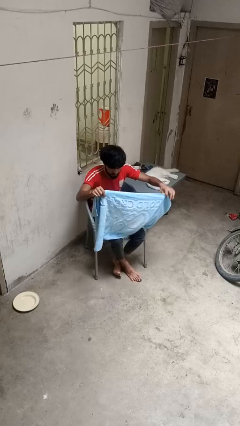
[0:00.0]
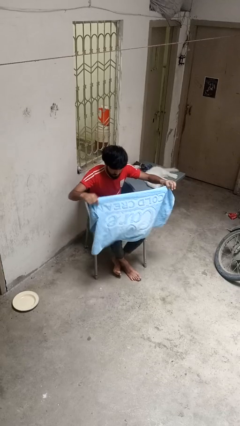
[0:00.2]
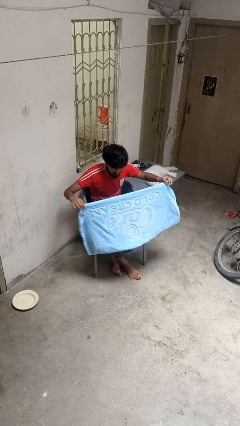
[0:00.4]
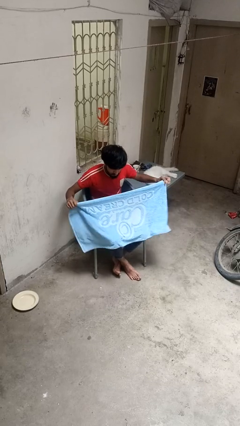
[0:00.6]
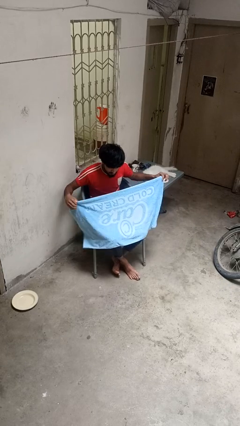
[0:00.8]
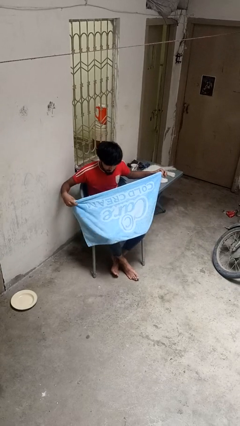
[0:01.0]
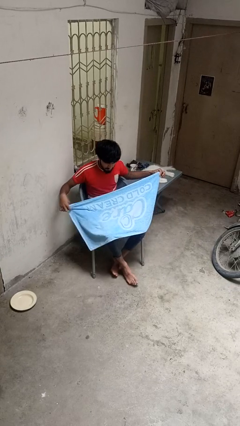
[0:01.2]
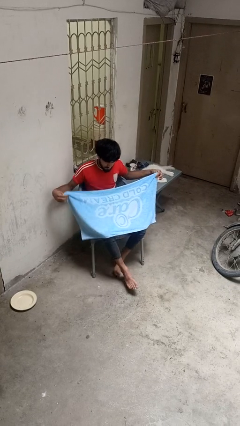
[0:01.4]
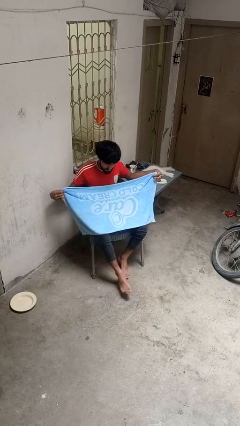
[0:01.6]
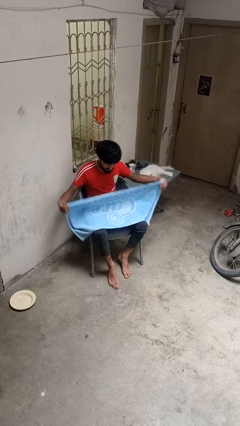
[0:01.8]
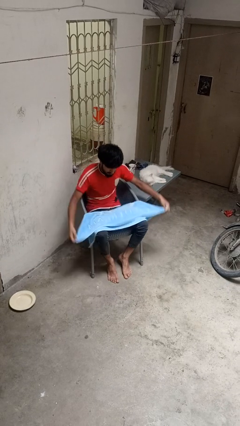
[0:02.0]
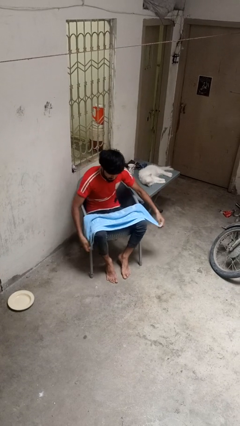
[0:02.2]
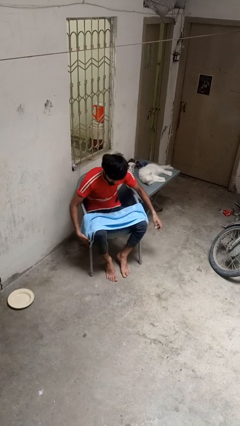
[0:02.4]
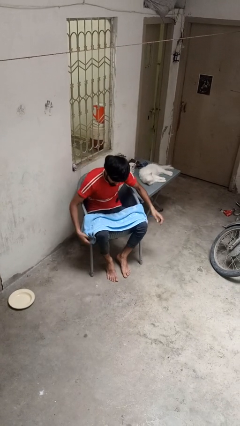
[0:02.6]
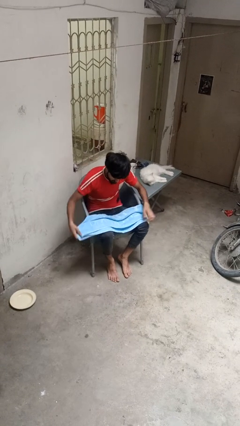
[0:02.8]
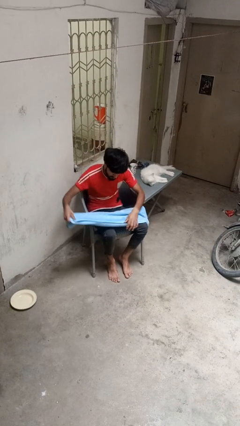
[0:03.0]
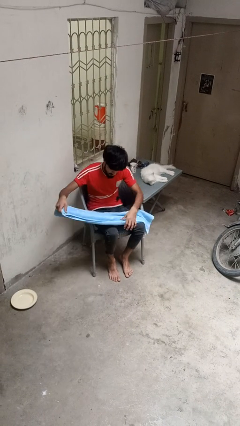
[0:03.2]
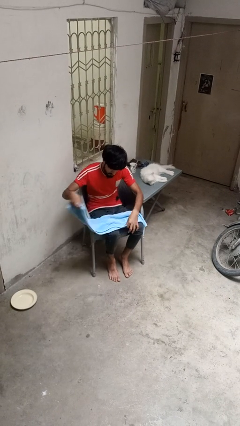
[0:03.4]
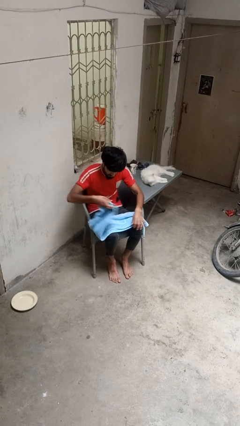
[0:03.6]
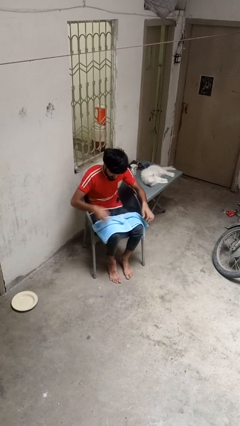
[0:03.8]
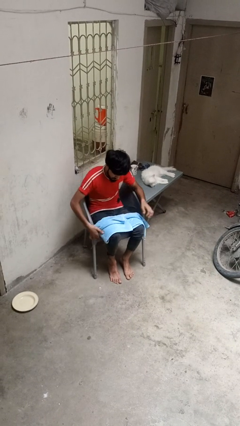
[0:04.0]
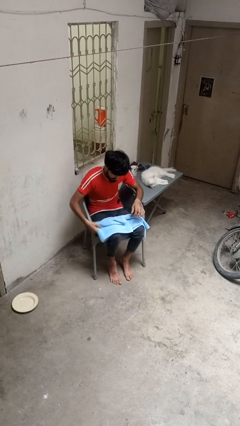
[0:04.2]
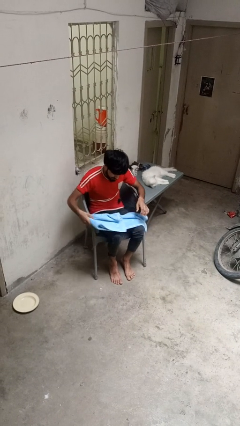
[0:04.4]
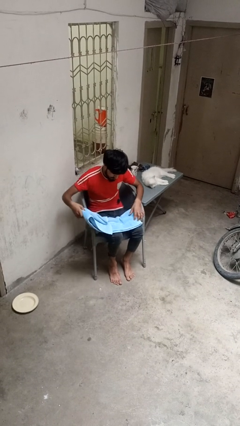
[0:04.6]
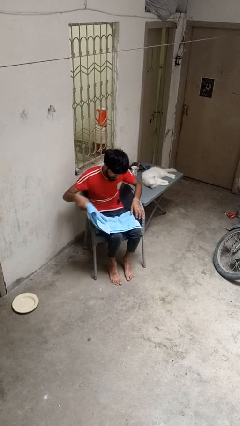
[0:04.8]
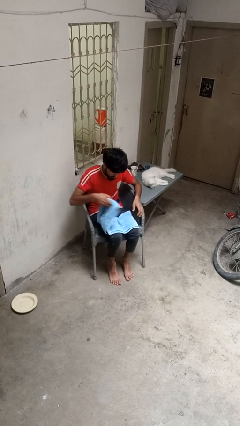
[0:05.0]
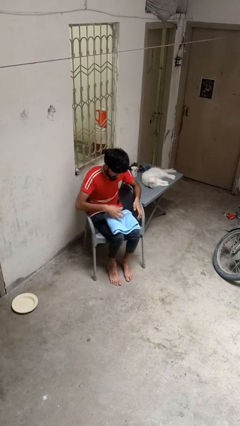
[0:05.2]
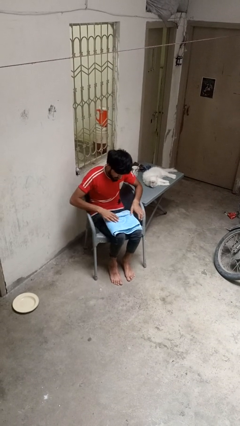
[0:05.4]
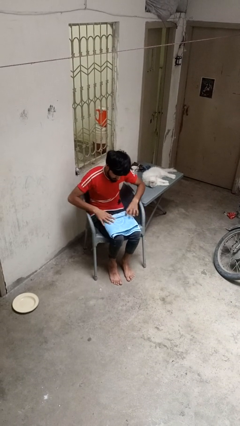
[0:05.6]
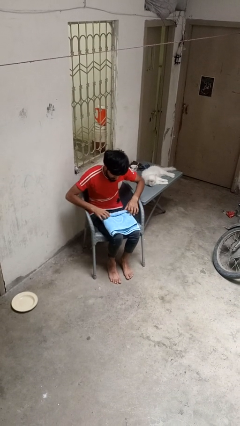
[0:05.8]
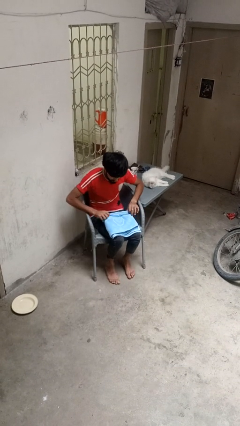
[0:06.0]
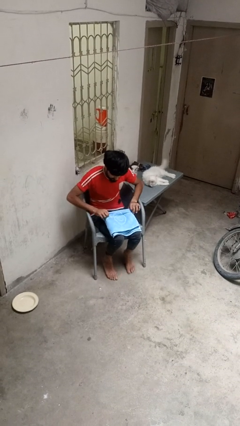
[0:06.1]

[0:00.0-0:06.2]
person folds towel

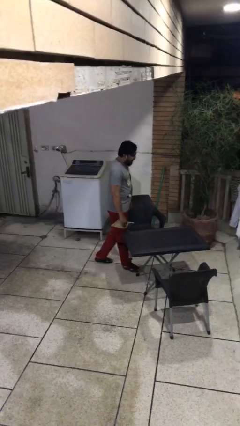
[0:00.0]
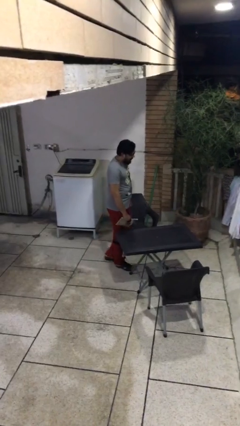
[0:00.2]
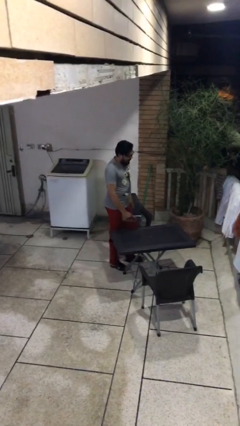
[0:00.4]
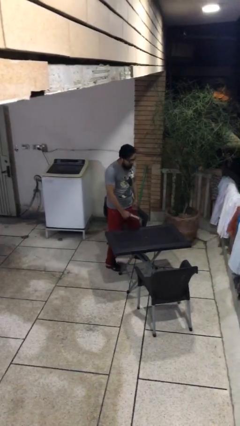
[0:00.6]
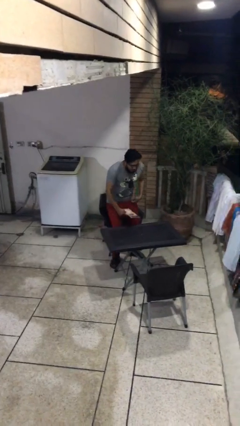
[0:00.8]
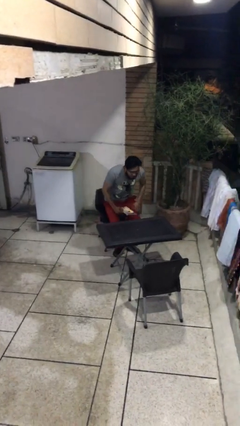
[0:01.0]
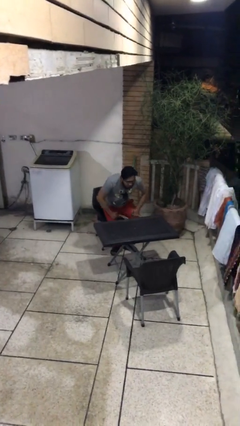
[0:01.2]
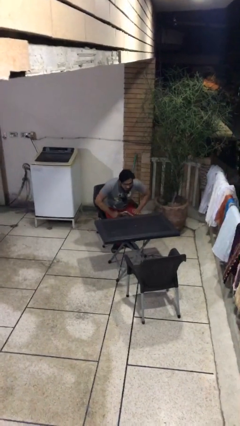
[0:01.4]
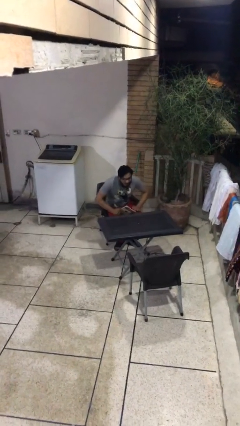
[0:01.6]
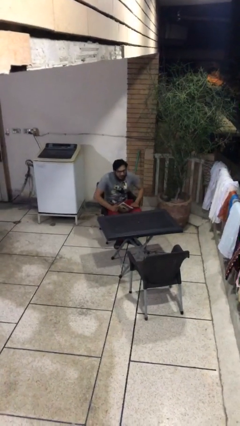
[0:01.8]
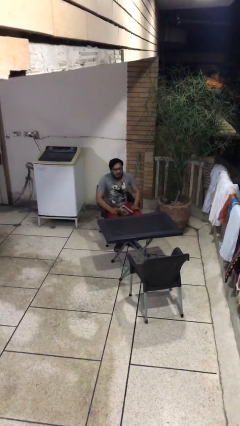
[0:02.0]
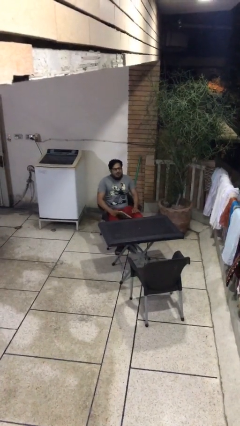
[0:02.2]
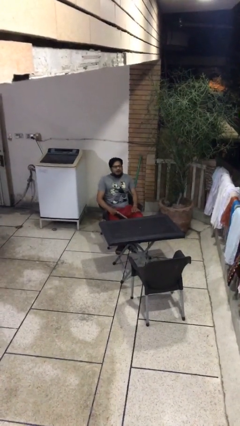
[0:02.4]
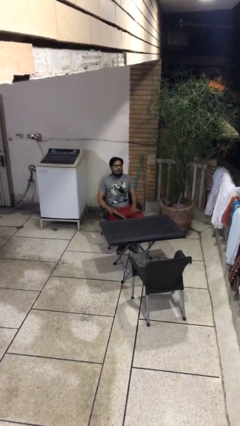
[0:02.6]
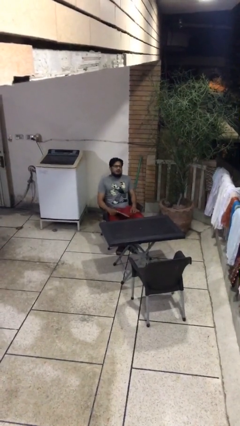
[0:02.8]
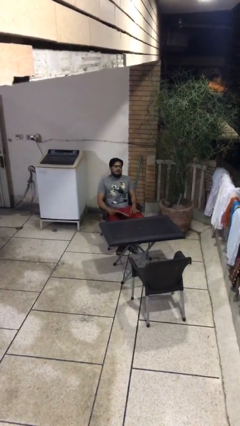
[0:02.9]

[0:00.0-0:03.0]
person sits down

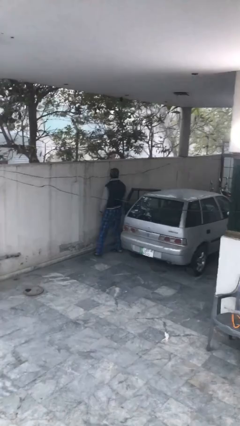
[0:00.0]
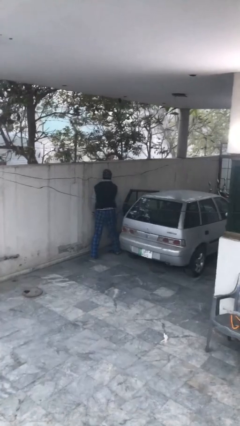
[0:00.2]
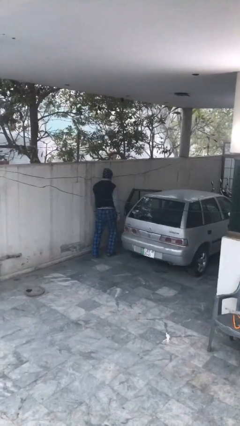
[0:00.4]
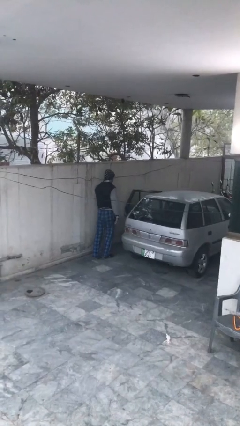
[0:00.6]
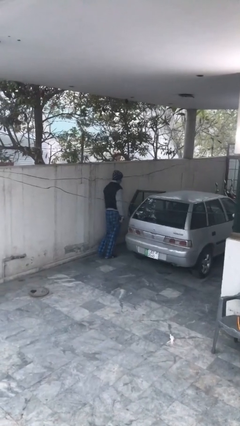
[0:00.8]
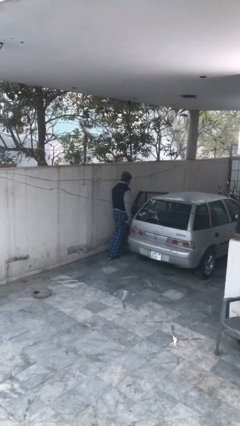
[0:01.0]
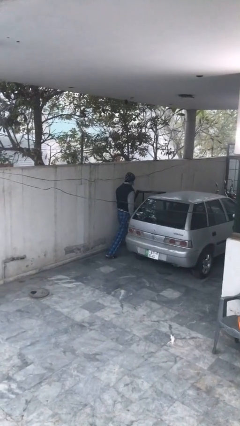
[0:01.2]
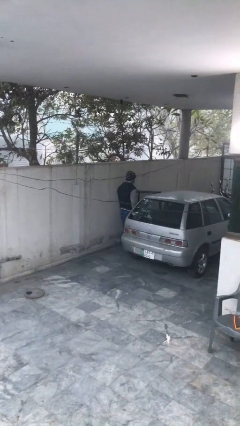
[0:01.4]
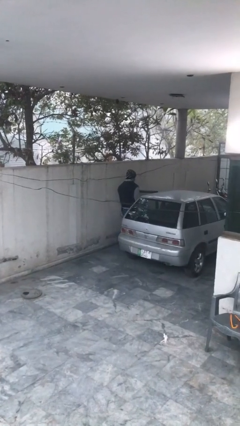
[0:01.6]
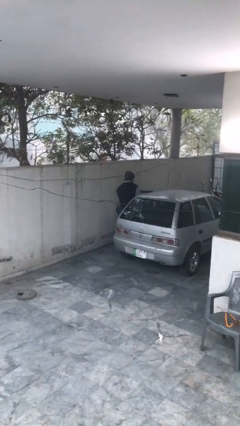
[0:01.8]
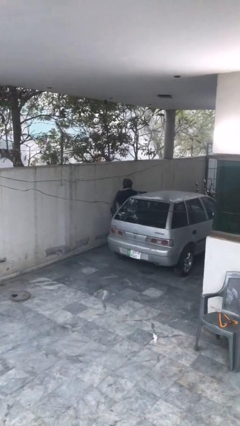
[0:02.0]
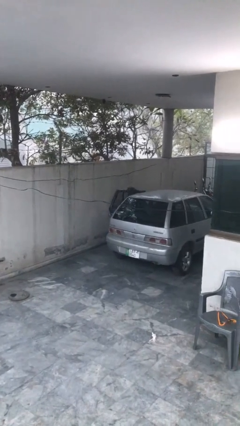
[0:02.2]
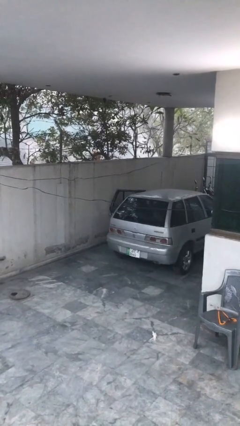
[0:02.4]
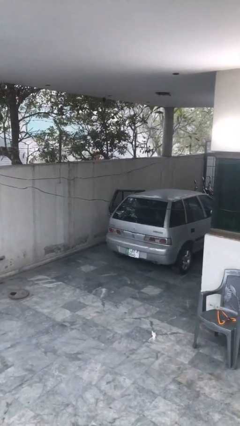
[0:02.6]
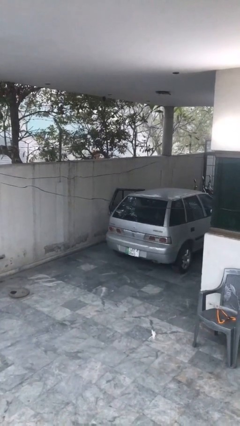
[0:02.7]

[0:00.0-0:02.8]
person enters car

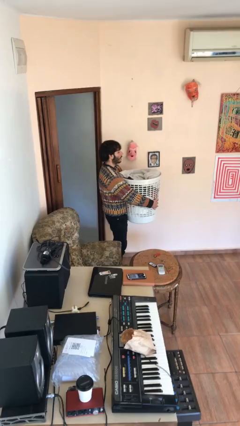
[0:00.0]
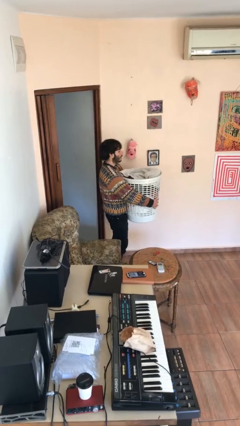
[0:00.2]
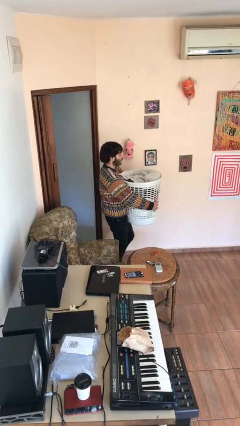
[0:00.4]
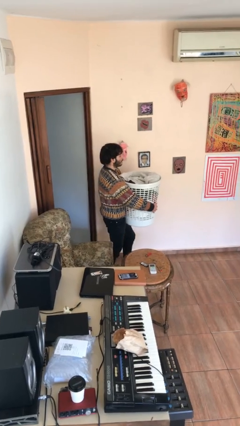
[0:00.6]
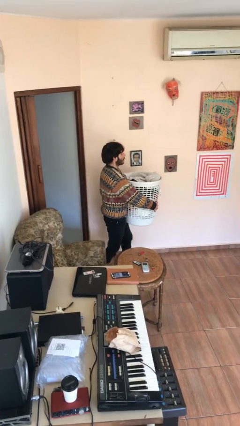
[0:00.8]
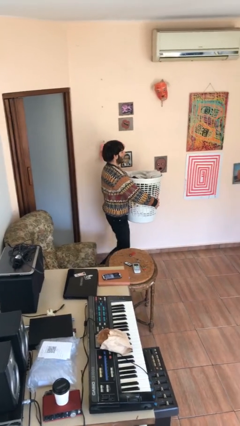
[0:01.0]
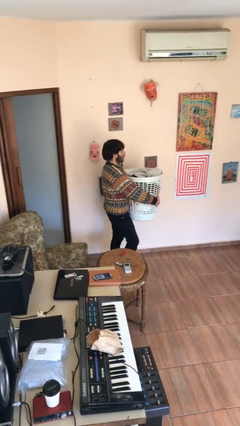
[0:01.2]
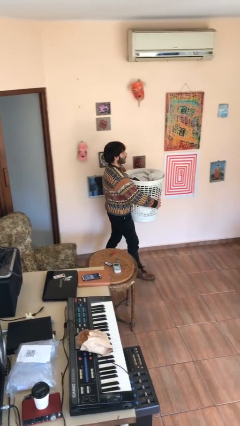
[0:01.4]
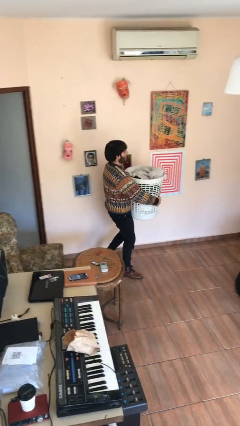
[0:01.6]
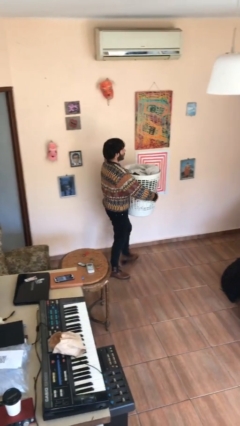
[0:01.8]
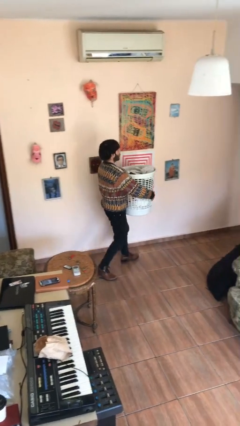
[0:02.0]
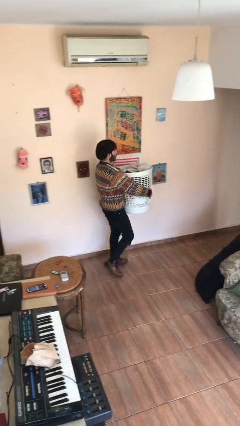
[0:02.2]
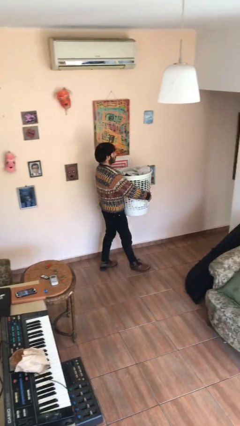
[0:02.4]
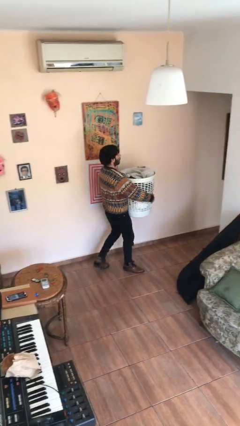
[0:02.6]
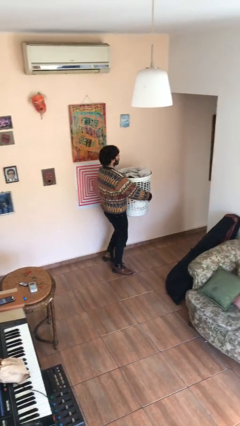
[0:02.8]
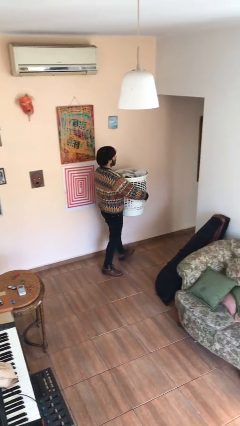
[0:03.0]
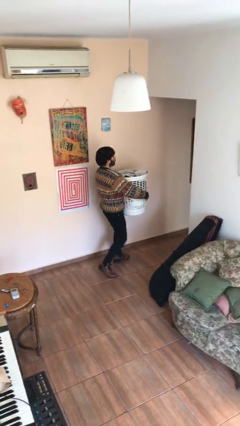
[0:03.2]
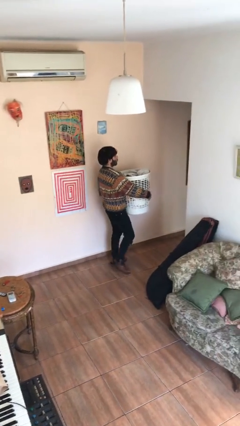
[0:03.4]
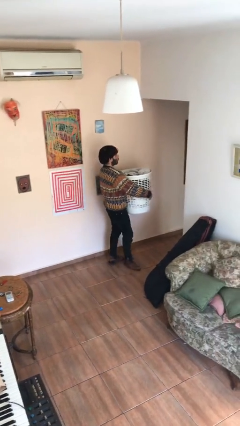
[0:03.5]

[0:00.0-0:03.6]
person carries laundry basket

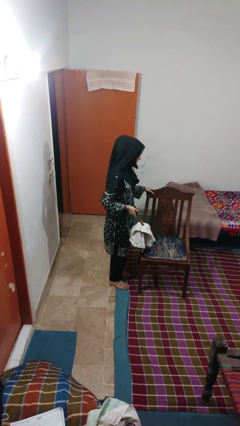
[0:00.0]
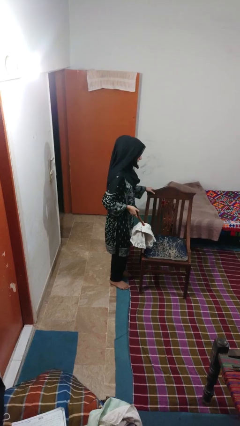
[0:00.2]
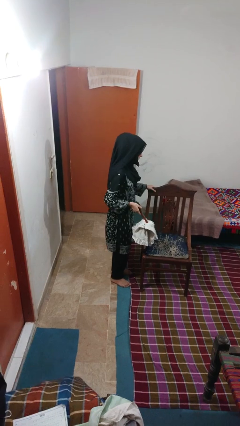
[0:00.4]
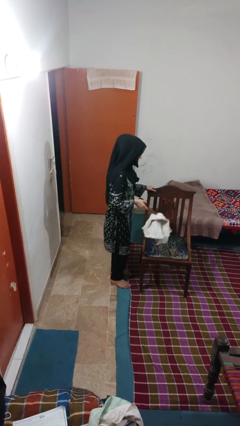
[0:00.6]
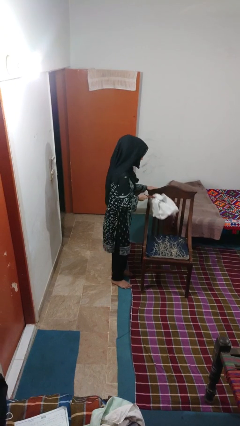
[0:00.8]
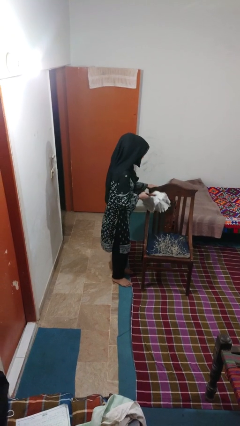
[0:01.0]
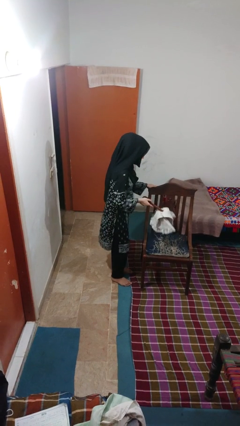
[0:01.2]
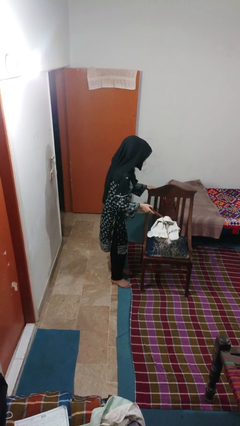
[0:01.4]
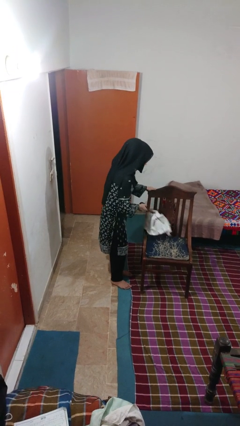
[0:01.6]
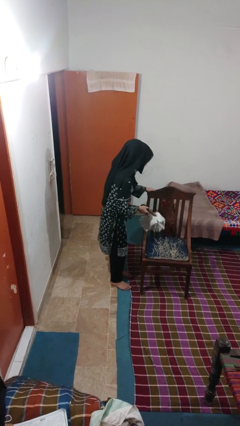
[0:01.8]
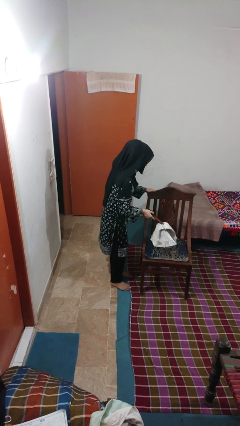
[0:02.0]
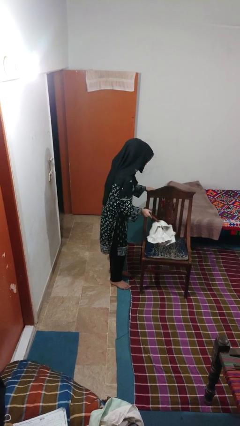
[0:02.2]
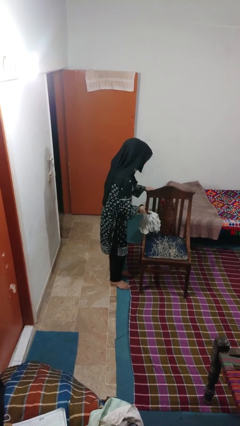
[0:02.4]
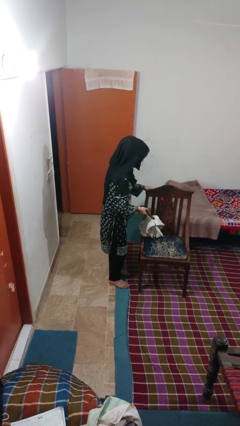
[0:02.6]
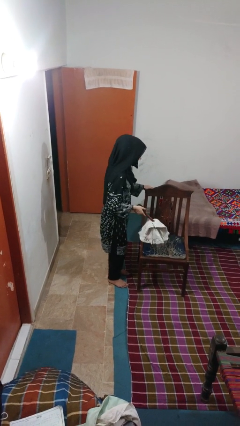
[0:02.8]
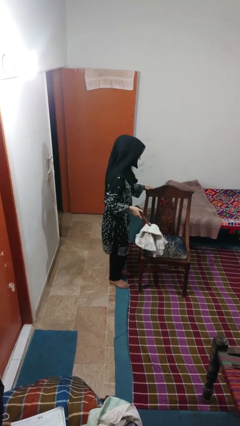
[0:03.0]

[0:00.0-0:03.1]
person dusts furniture
